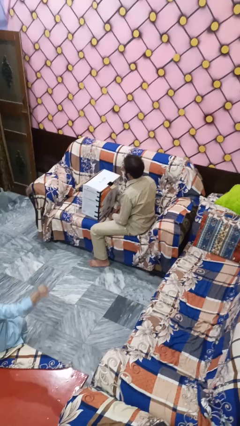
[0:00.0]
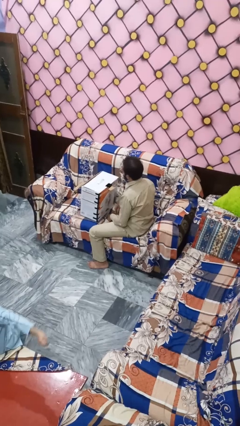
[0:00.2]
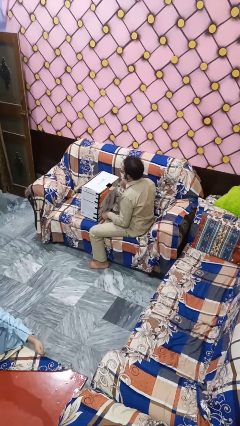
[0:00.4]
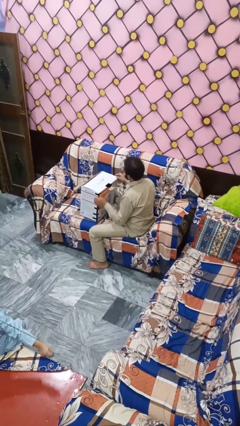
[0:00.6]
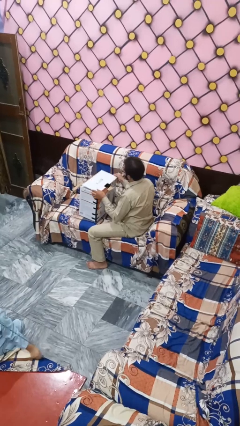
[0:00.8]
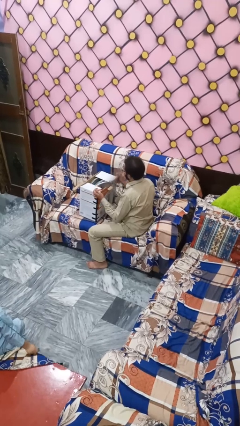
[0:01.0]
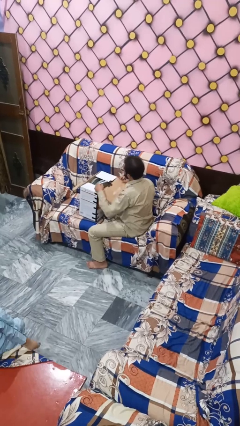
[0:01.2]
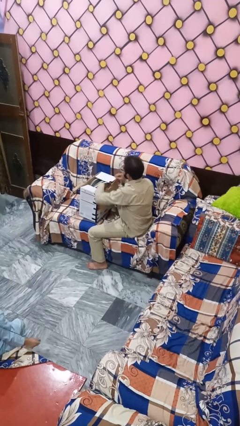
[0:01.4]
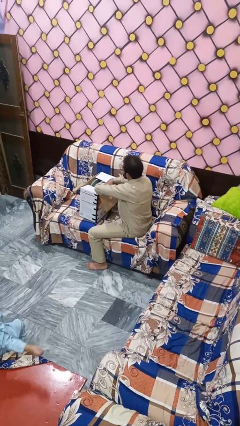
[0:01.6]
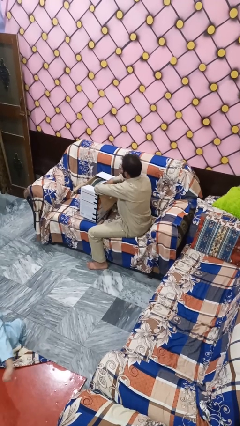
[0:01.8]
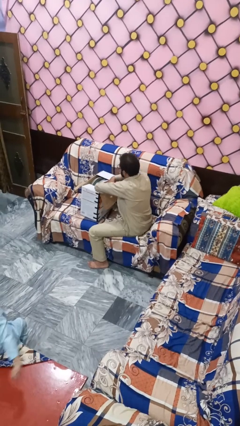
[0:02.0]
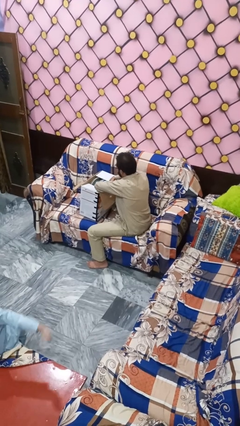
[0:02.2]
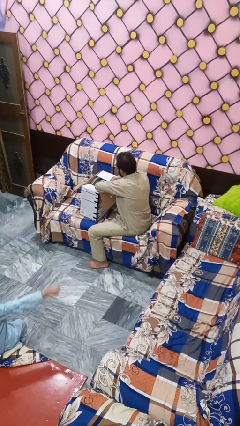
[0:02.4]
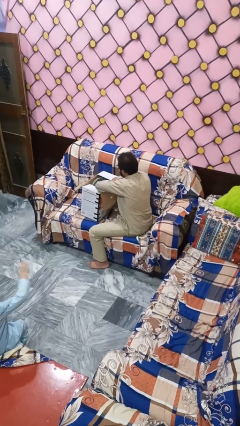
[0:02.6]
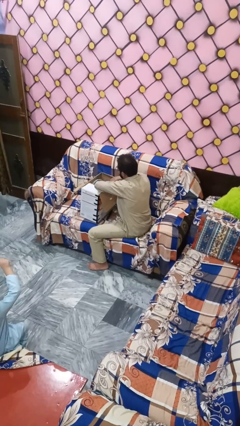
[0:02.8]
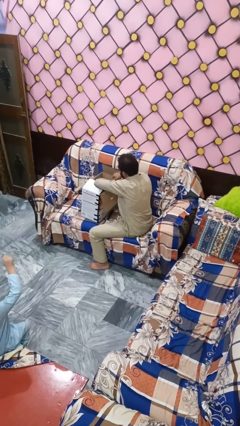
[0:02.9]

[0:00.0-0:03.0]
person searches in box

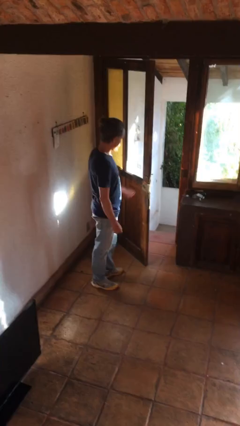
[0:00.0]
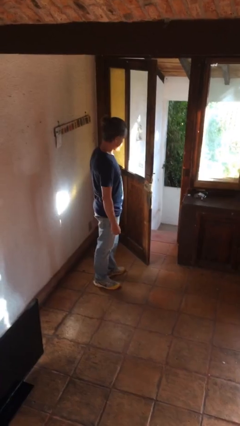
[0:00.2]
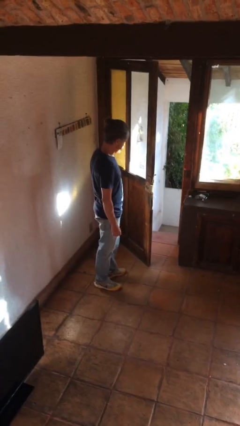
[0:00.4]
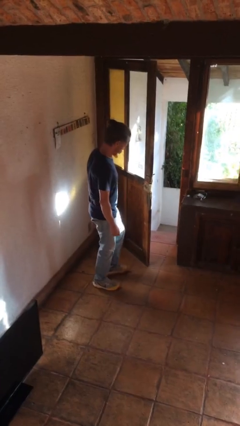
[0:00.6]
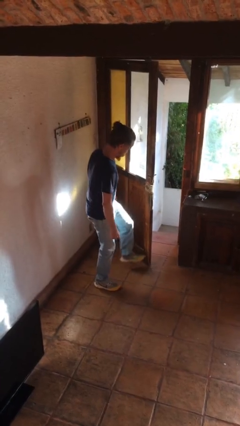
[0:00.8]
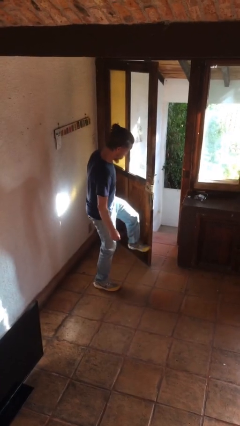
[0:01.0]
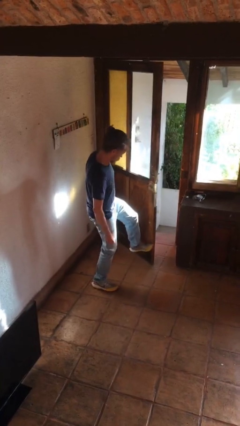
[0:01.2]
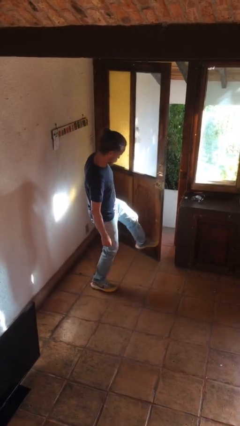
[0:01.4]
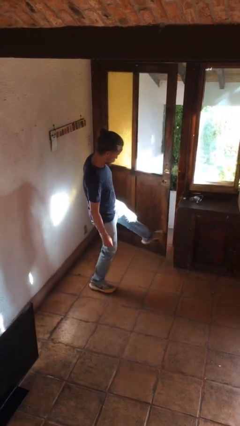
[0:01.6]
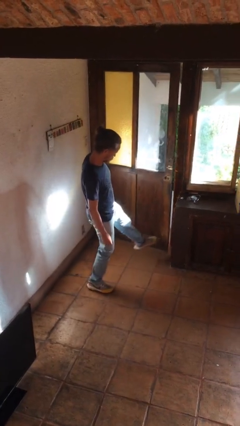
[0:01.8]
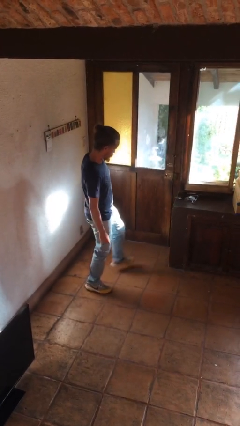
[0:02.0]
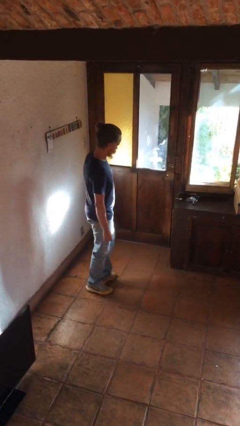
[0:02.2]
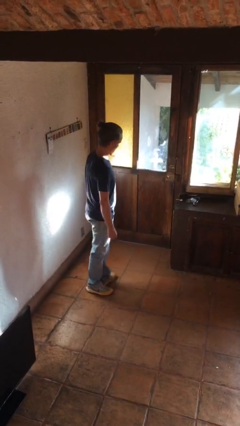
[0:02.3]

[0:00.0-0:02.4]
person closes door with foot

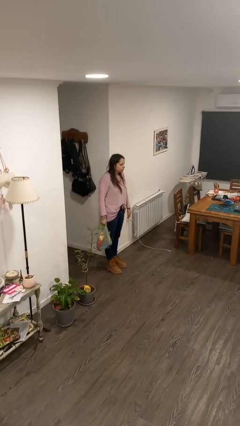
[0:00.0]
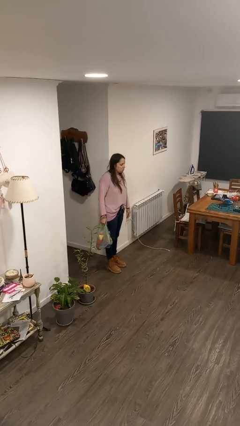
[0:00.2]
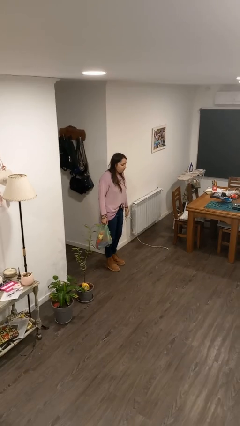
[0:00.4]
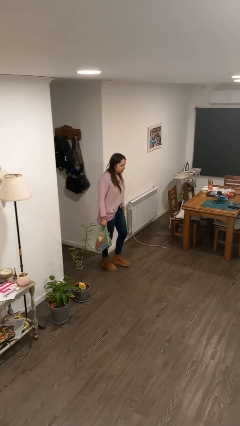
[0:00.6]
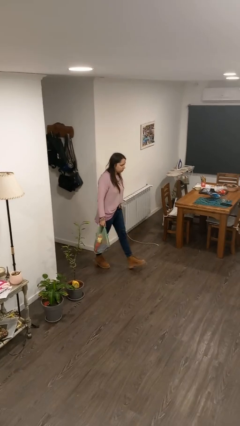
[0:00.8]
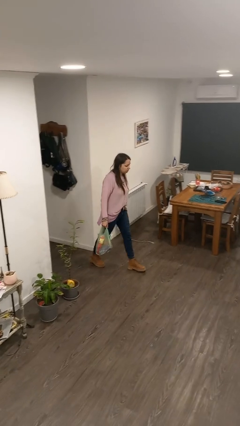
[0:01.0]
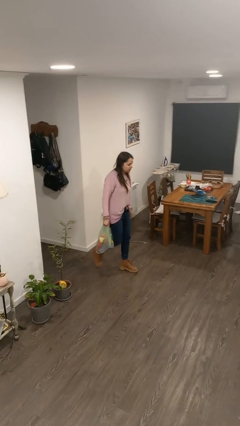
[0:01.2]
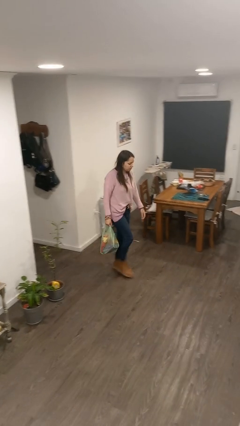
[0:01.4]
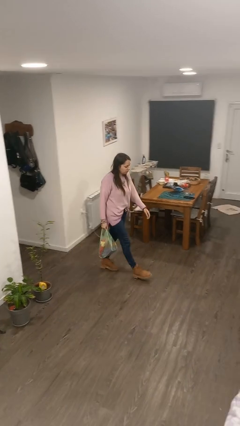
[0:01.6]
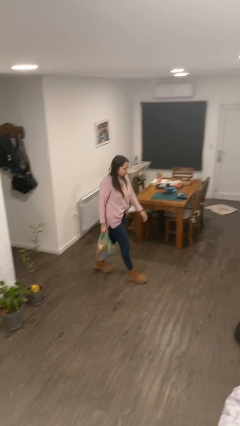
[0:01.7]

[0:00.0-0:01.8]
person carries groceries

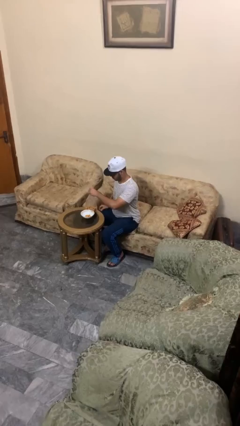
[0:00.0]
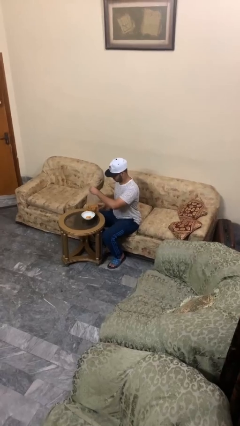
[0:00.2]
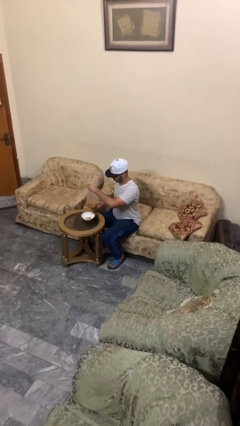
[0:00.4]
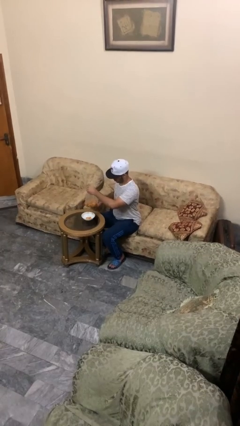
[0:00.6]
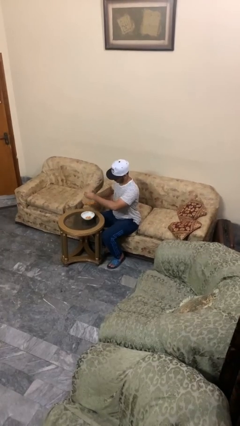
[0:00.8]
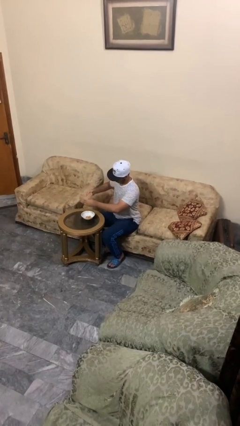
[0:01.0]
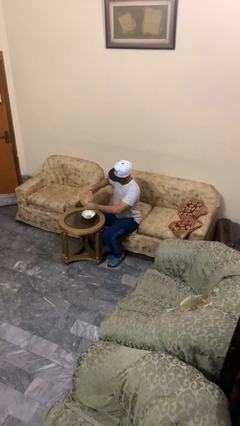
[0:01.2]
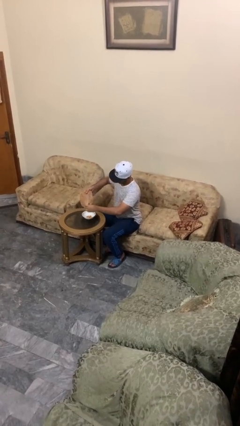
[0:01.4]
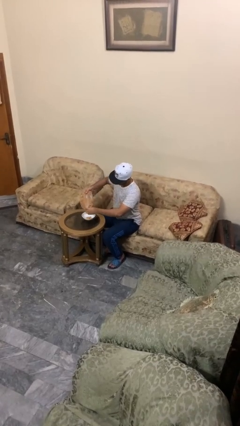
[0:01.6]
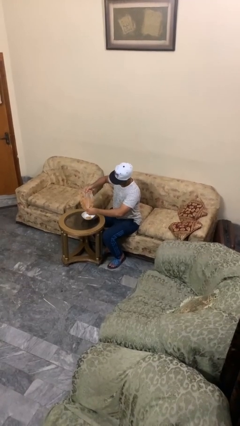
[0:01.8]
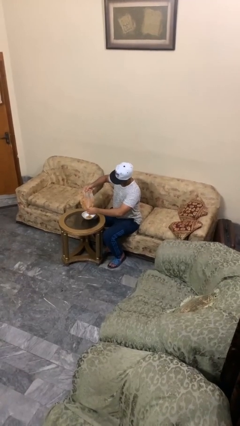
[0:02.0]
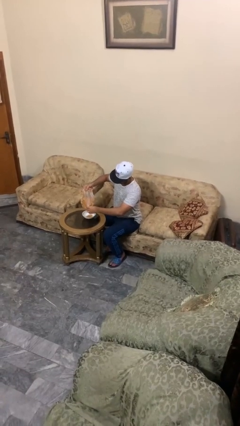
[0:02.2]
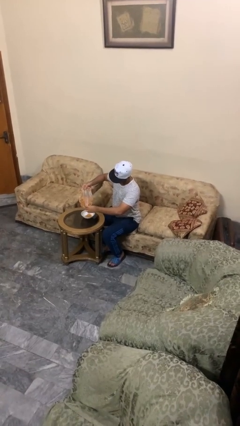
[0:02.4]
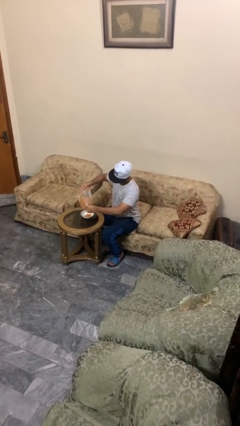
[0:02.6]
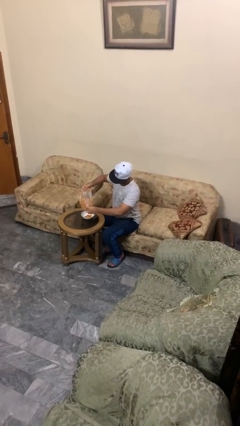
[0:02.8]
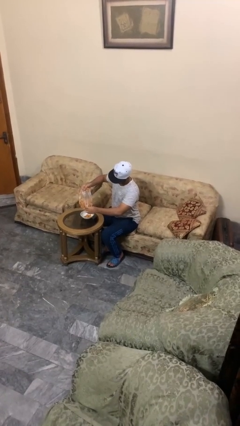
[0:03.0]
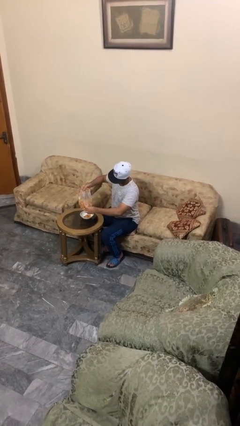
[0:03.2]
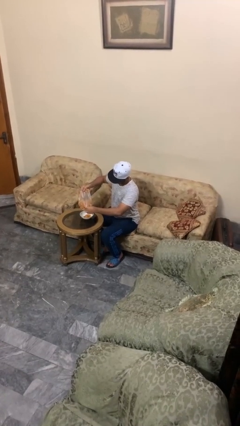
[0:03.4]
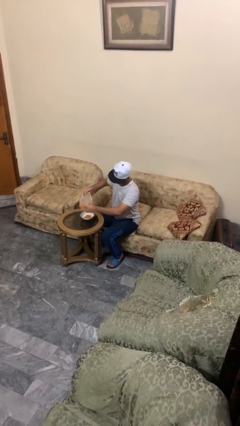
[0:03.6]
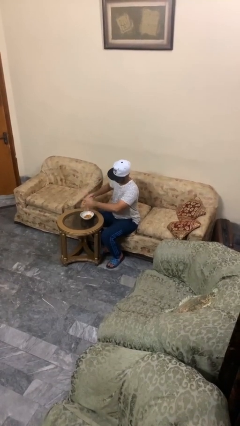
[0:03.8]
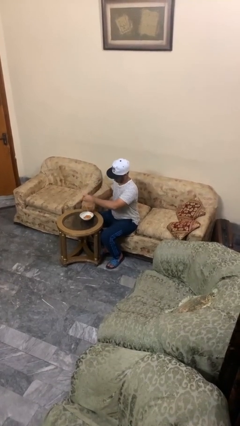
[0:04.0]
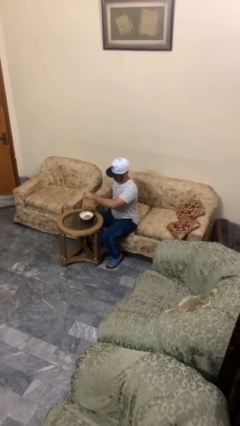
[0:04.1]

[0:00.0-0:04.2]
person pours into bowl

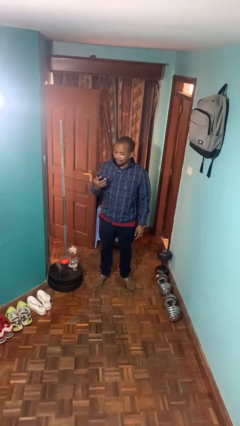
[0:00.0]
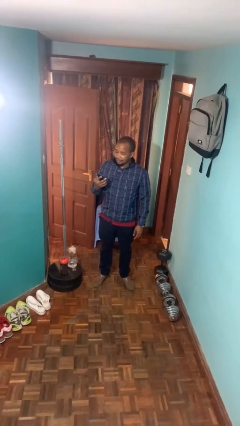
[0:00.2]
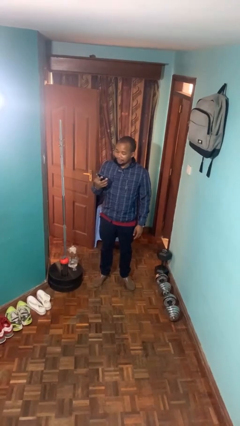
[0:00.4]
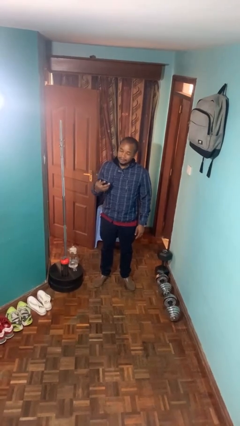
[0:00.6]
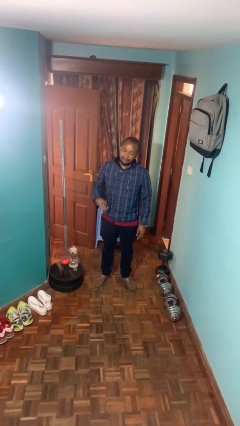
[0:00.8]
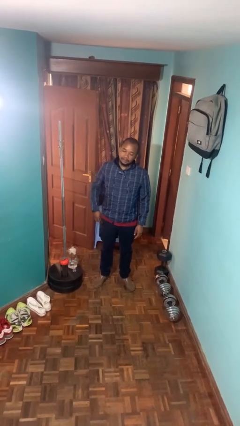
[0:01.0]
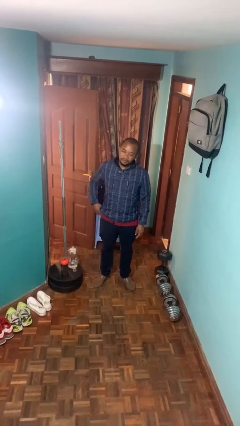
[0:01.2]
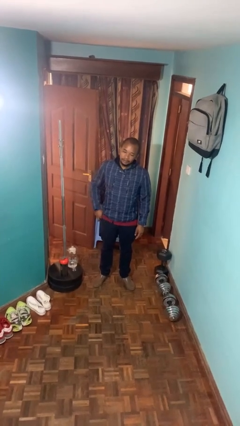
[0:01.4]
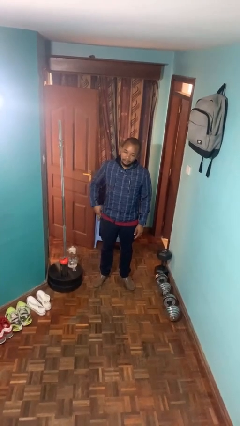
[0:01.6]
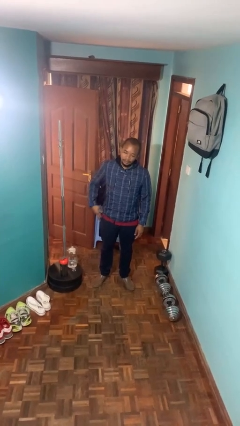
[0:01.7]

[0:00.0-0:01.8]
person puts phone into pocket

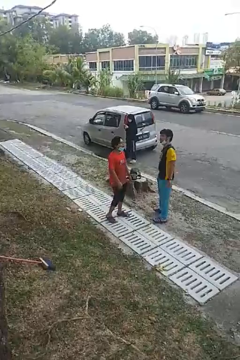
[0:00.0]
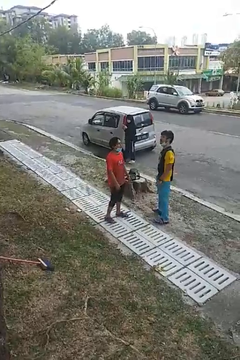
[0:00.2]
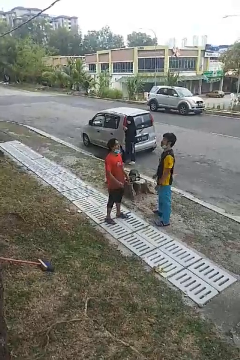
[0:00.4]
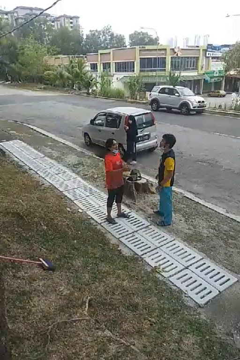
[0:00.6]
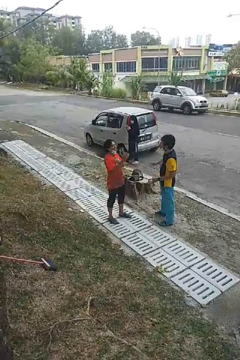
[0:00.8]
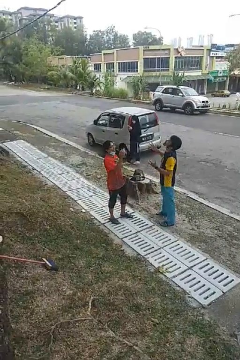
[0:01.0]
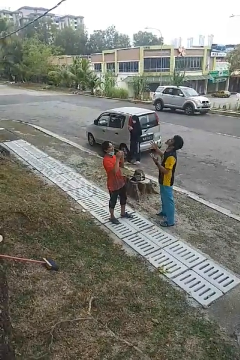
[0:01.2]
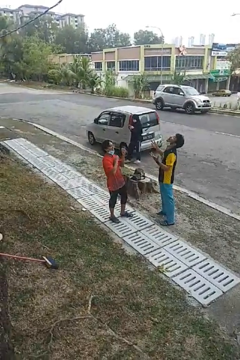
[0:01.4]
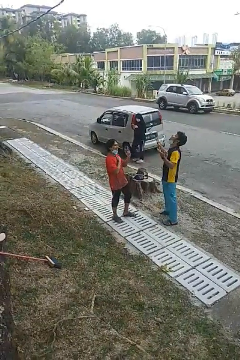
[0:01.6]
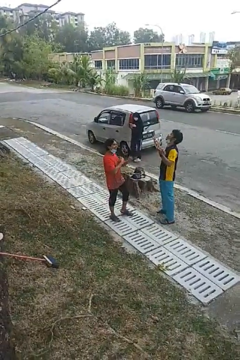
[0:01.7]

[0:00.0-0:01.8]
person laughs with person

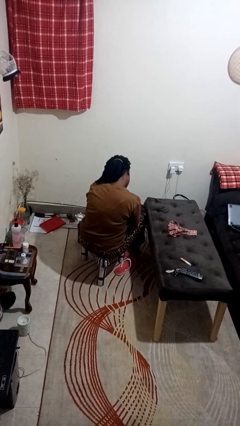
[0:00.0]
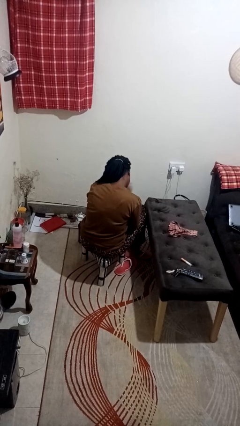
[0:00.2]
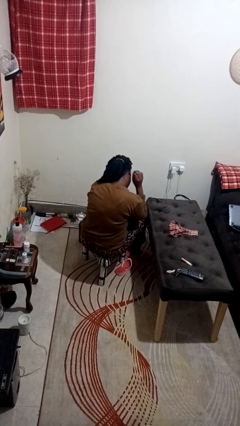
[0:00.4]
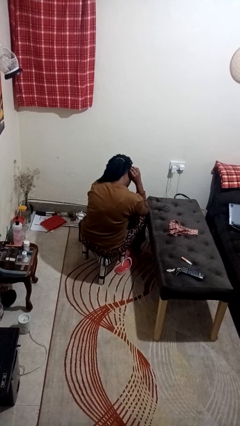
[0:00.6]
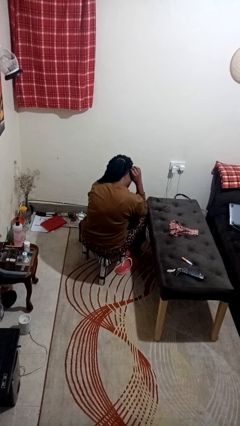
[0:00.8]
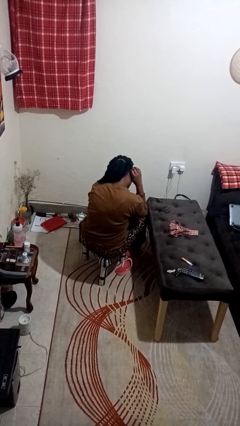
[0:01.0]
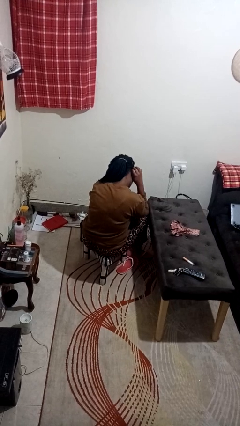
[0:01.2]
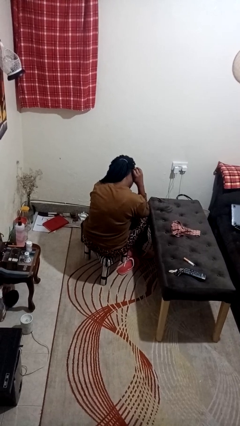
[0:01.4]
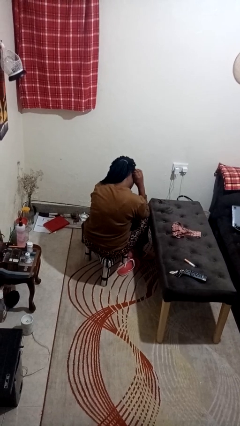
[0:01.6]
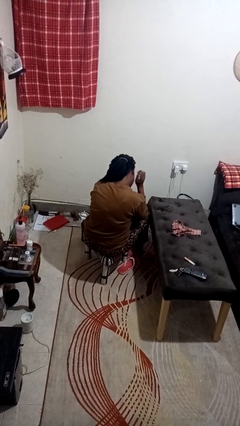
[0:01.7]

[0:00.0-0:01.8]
person gestures listen closely

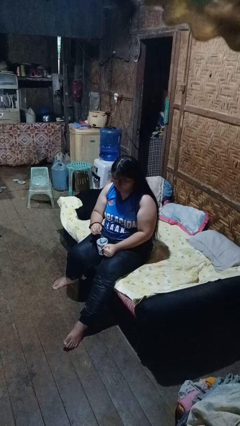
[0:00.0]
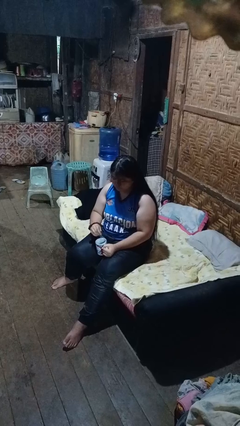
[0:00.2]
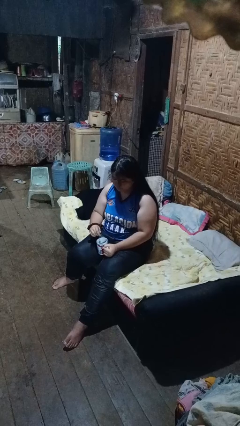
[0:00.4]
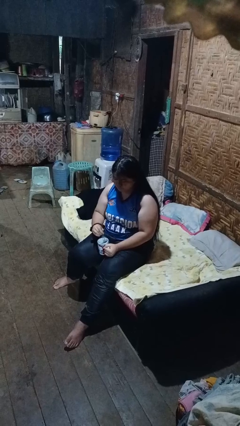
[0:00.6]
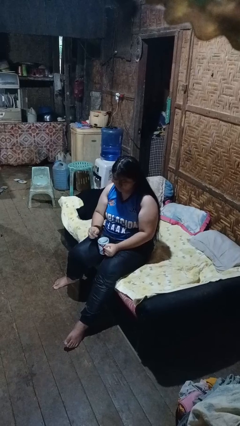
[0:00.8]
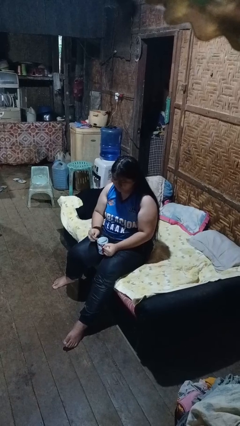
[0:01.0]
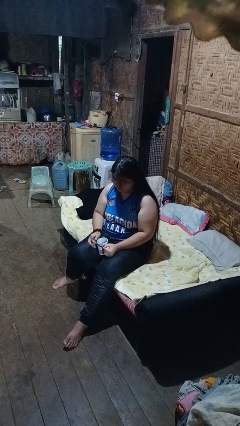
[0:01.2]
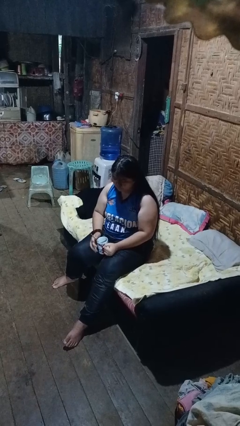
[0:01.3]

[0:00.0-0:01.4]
person stirs mug
